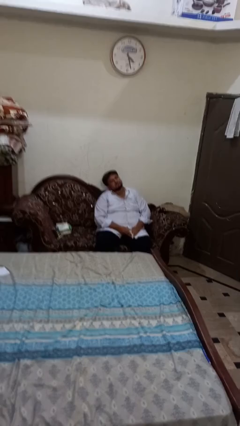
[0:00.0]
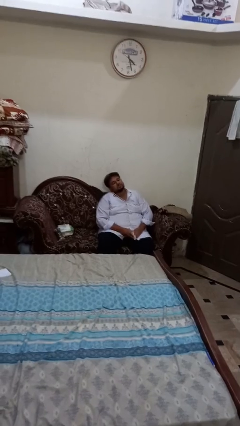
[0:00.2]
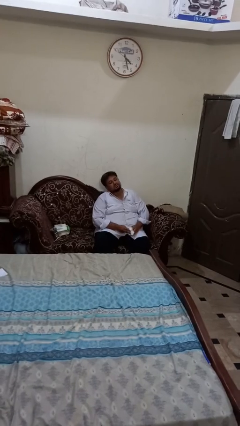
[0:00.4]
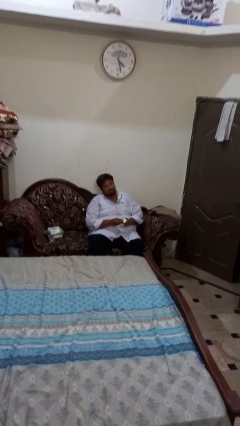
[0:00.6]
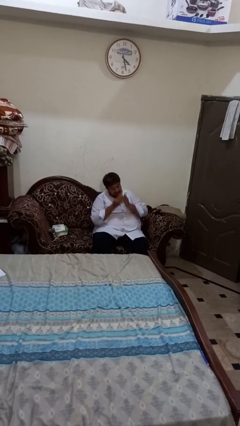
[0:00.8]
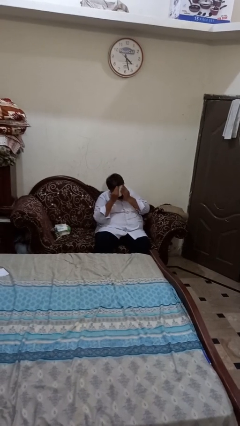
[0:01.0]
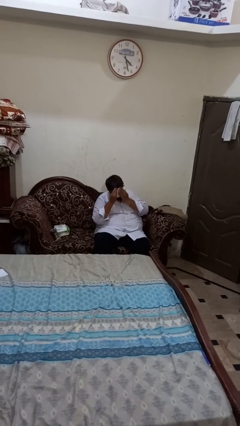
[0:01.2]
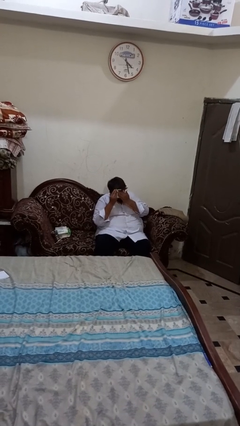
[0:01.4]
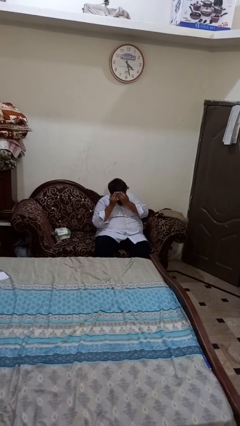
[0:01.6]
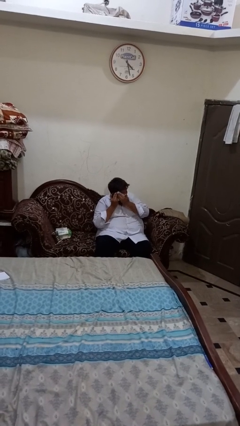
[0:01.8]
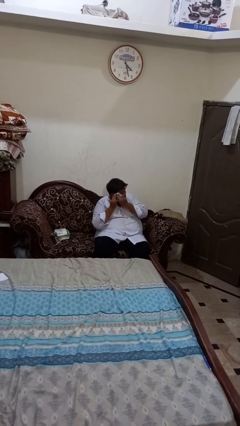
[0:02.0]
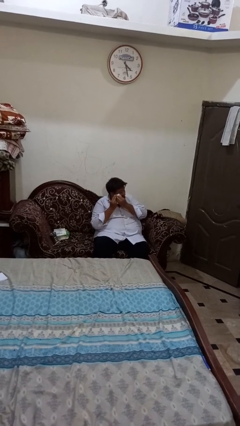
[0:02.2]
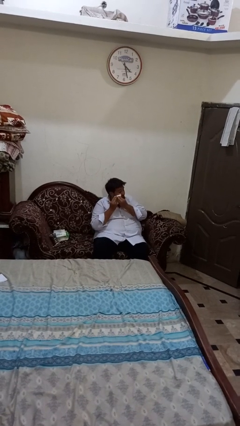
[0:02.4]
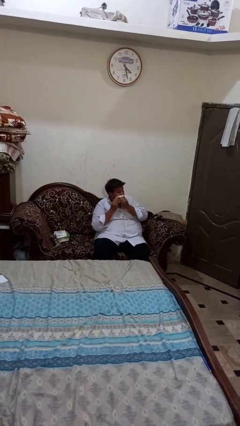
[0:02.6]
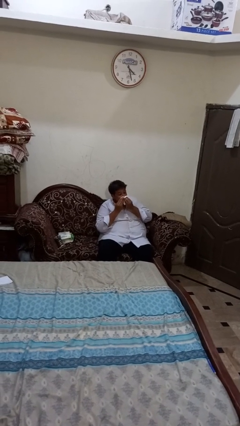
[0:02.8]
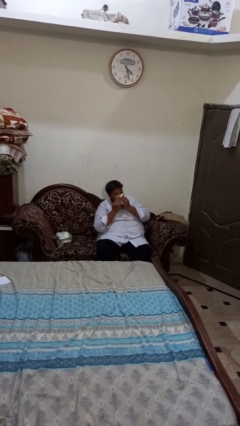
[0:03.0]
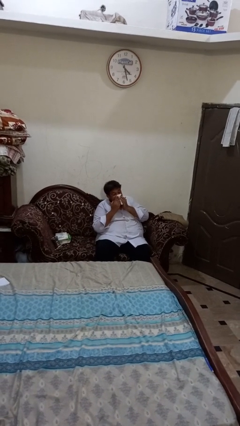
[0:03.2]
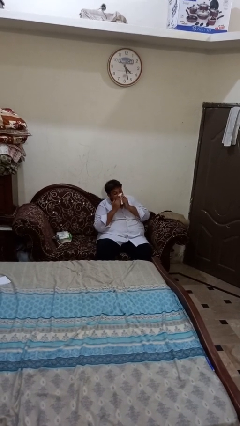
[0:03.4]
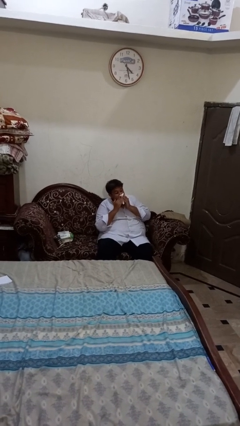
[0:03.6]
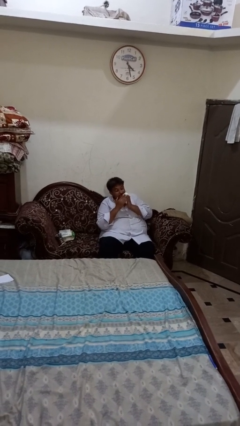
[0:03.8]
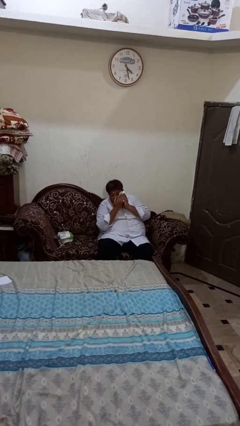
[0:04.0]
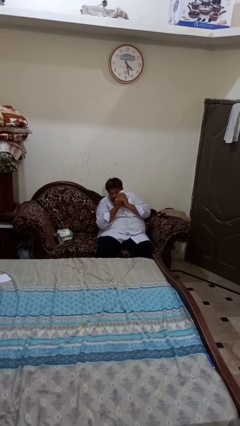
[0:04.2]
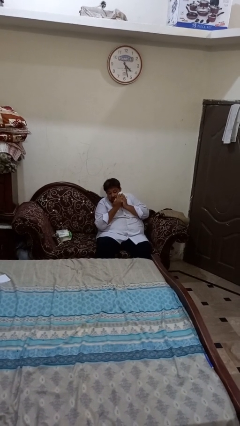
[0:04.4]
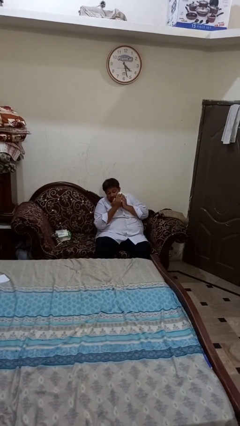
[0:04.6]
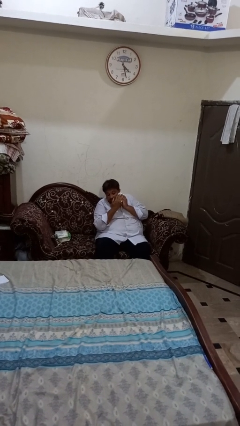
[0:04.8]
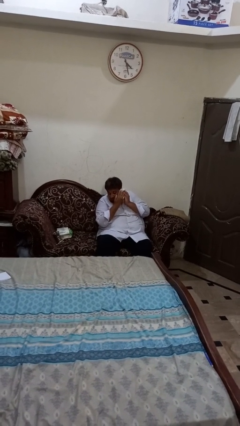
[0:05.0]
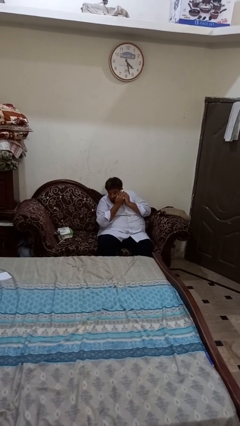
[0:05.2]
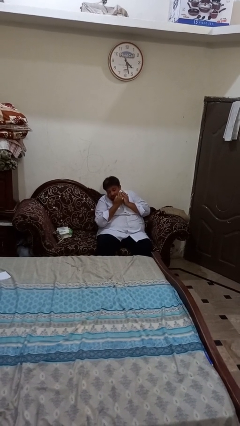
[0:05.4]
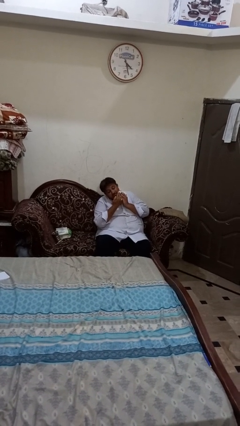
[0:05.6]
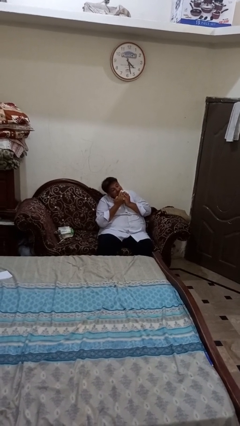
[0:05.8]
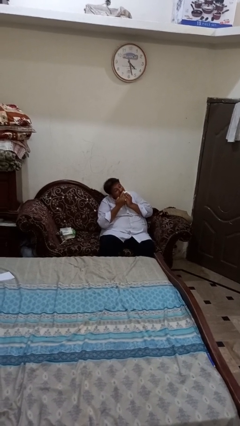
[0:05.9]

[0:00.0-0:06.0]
person wipes mouth with napkin

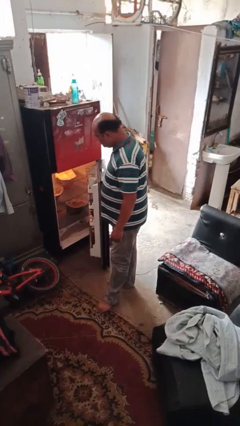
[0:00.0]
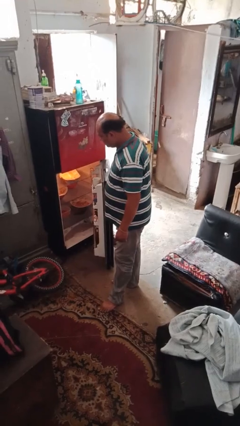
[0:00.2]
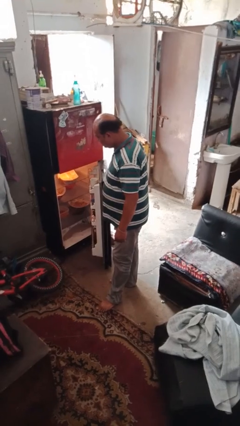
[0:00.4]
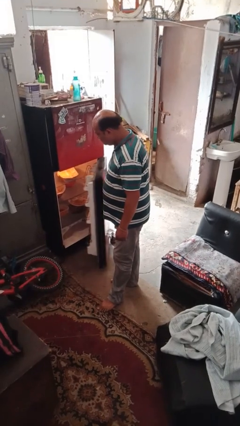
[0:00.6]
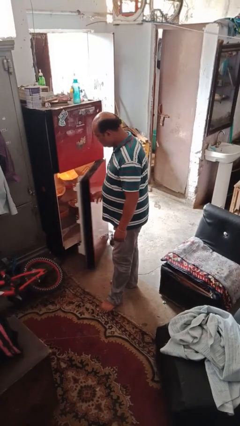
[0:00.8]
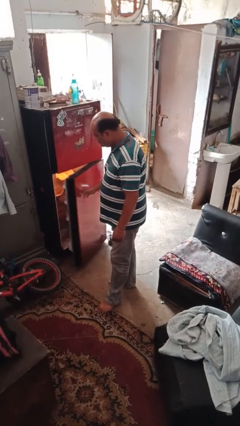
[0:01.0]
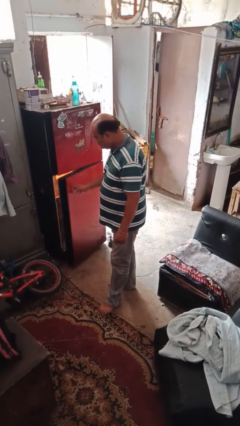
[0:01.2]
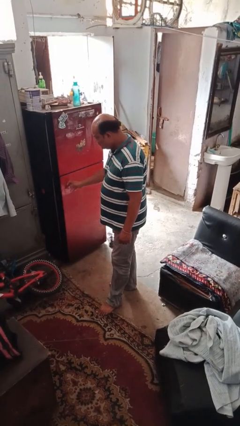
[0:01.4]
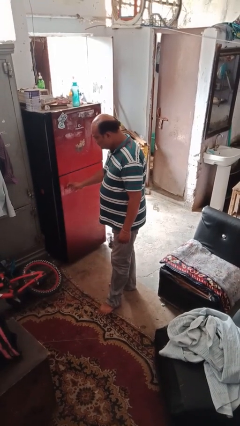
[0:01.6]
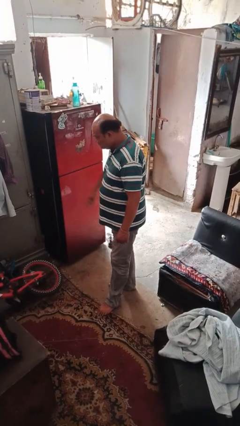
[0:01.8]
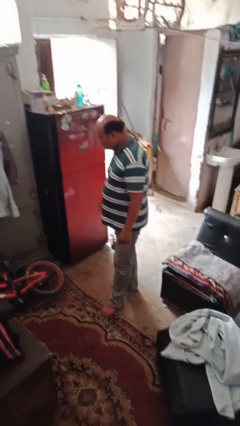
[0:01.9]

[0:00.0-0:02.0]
person closes refrigerator

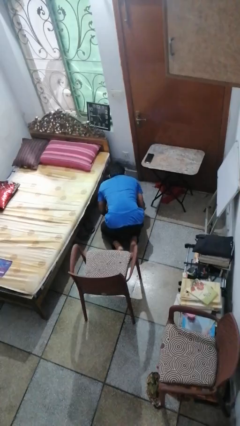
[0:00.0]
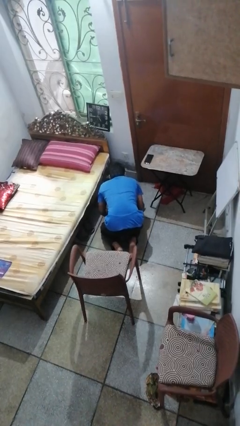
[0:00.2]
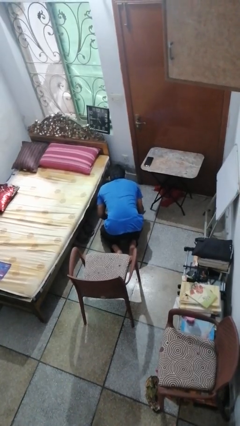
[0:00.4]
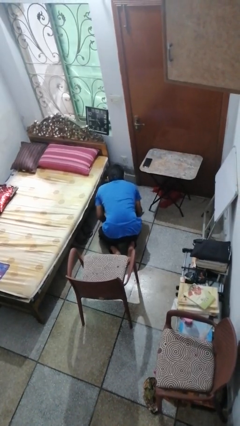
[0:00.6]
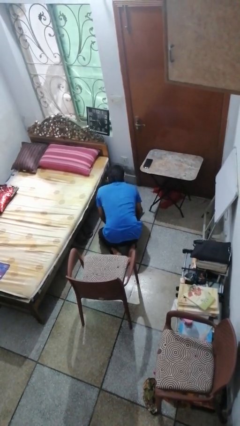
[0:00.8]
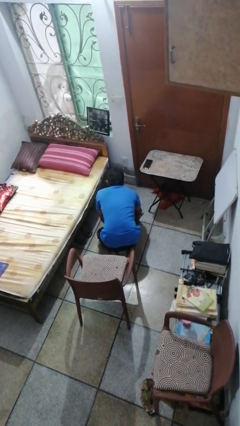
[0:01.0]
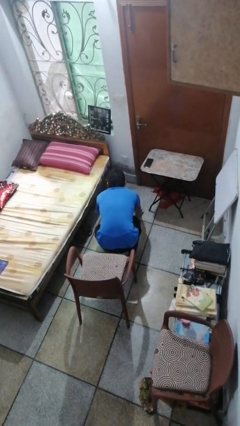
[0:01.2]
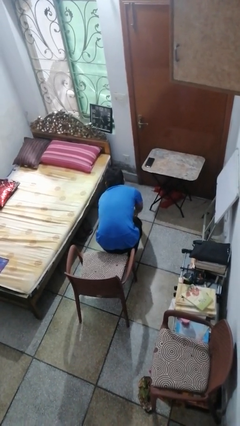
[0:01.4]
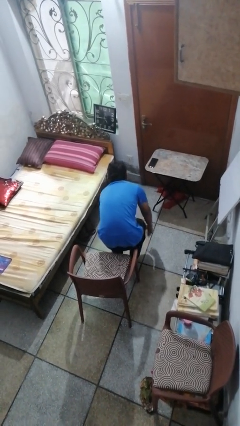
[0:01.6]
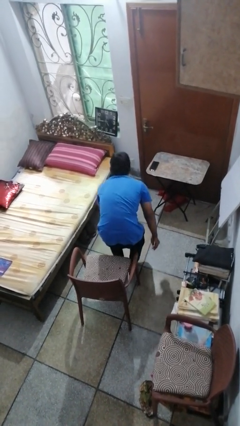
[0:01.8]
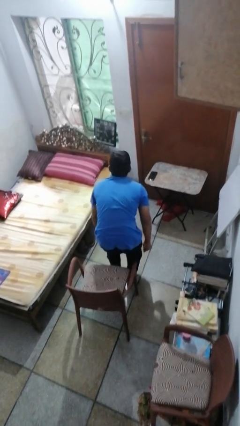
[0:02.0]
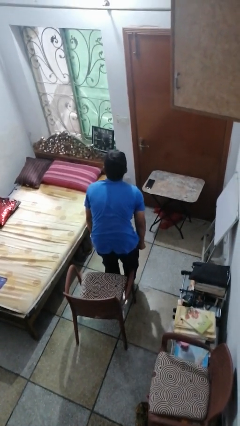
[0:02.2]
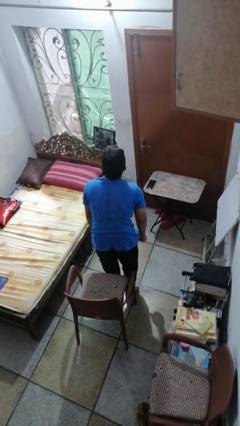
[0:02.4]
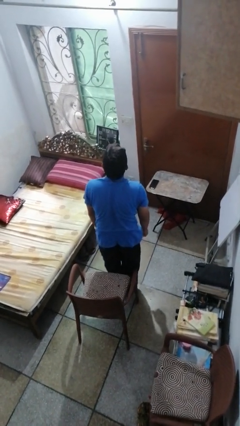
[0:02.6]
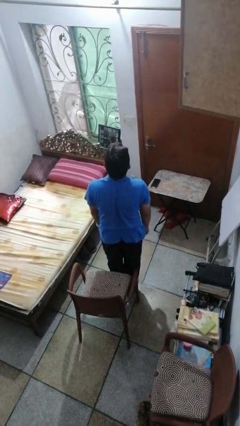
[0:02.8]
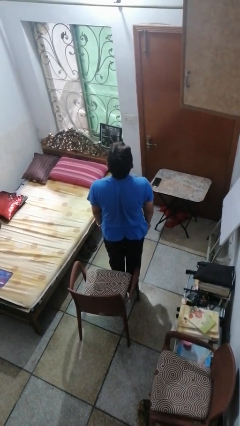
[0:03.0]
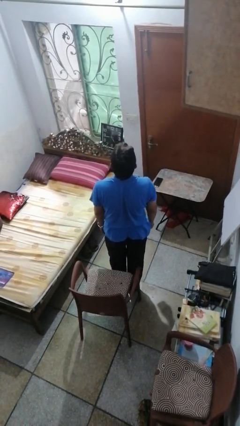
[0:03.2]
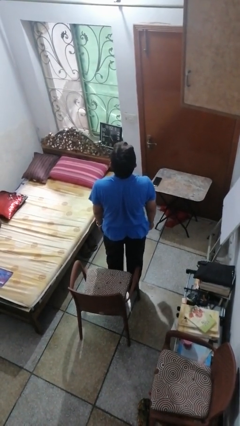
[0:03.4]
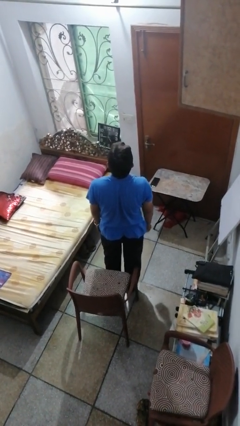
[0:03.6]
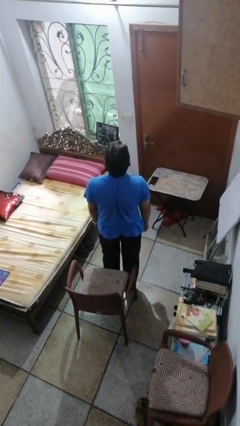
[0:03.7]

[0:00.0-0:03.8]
person stands up from floor

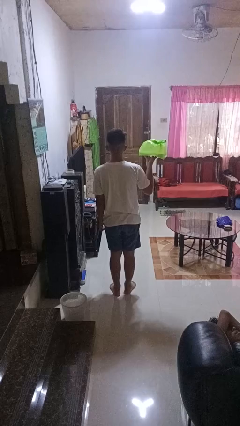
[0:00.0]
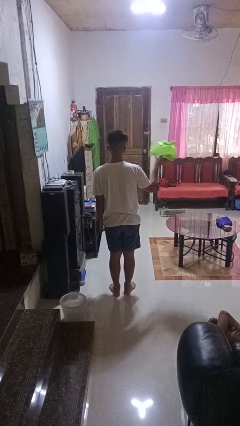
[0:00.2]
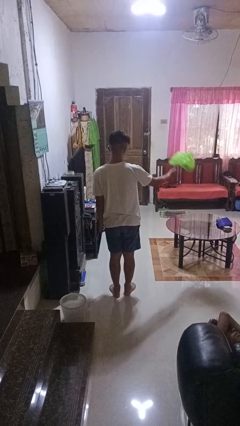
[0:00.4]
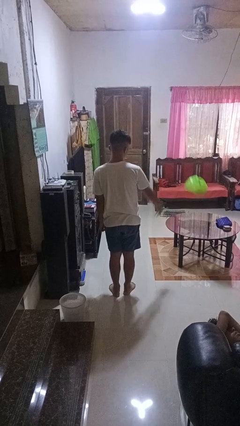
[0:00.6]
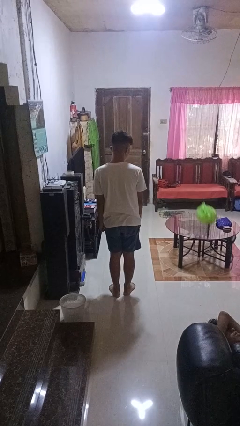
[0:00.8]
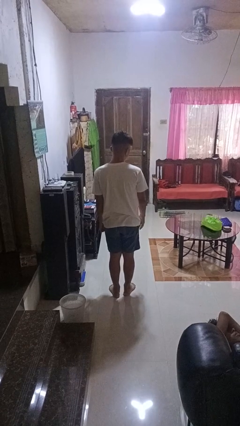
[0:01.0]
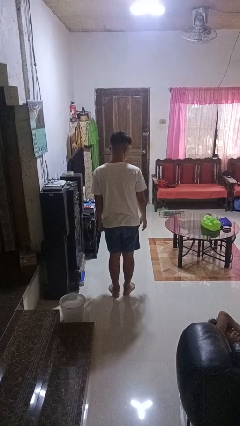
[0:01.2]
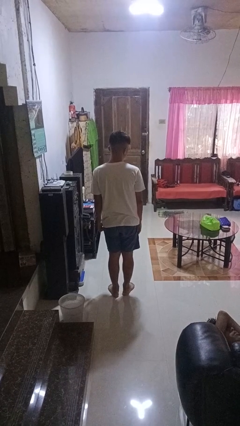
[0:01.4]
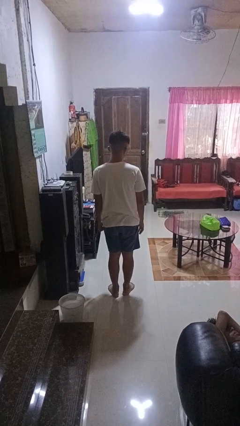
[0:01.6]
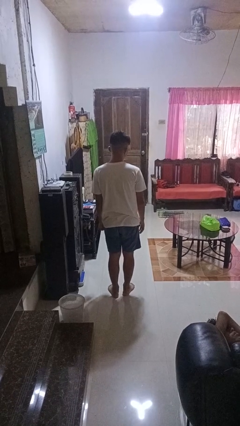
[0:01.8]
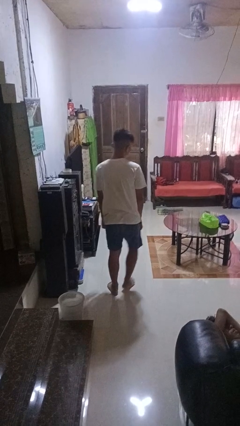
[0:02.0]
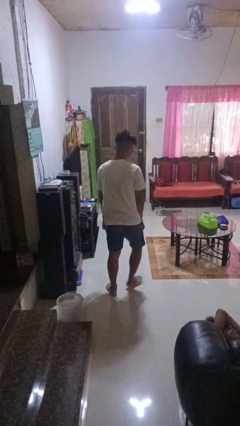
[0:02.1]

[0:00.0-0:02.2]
person throws object on table

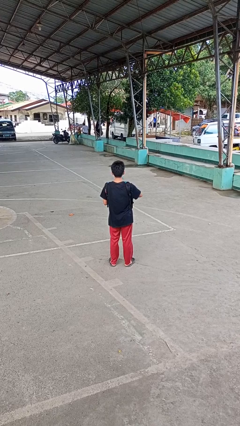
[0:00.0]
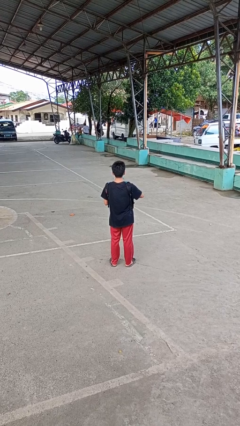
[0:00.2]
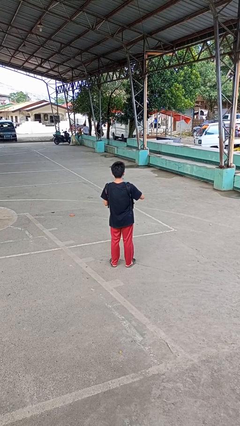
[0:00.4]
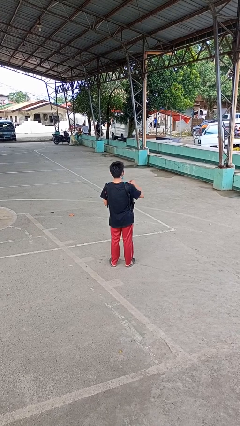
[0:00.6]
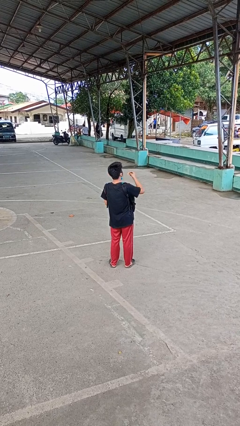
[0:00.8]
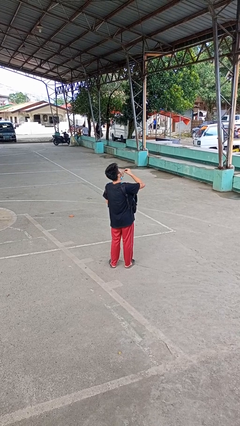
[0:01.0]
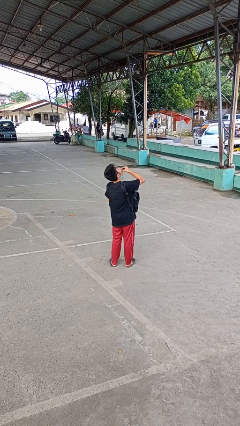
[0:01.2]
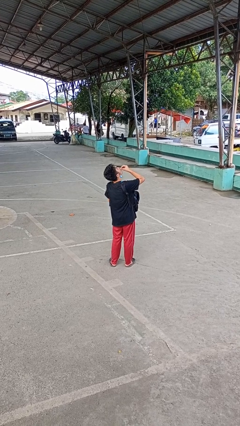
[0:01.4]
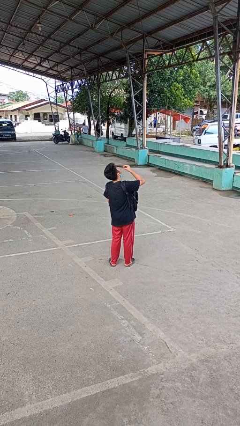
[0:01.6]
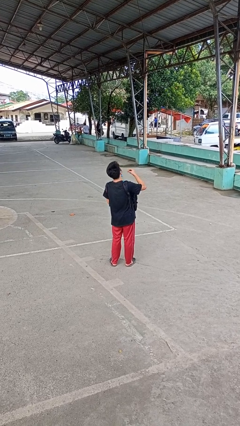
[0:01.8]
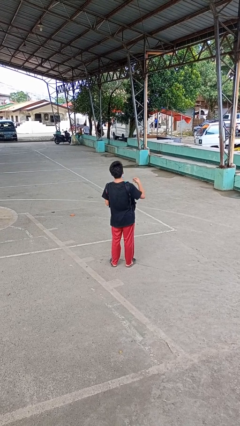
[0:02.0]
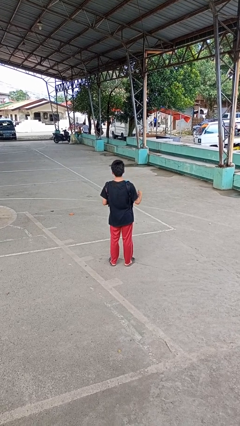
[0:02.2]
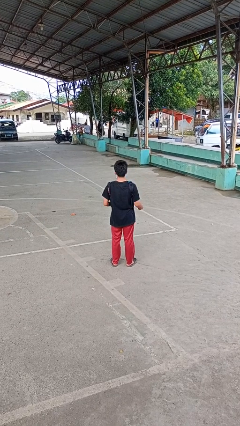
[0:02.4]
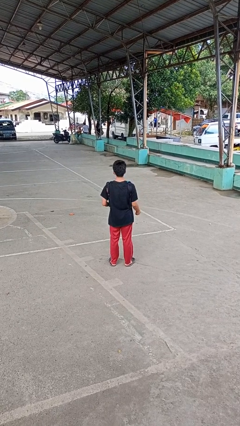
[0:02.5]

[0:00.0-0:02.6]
person eats snack from bag

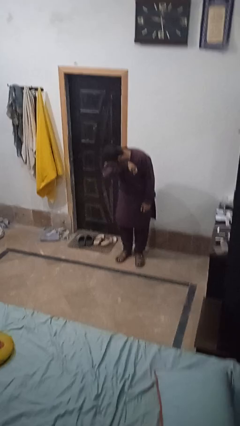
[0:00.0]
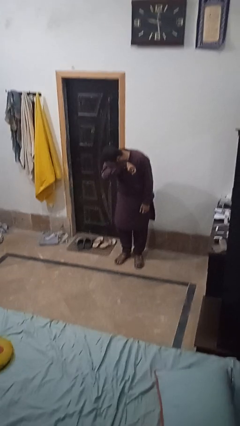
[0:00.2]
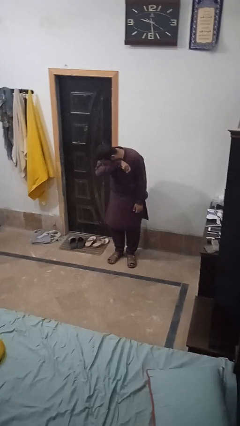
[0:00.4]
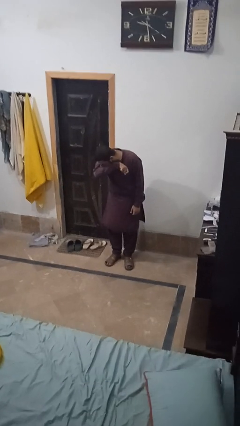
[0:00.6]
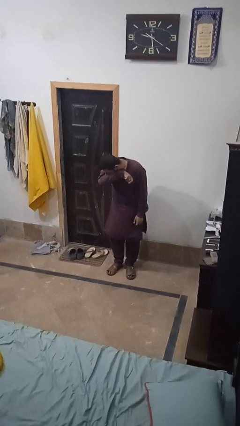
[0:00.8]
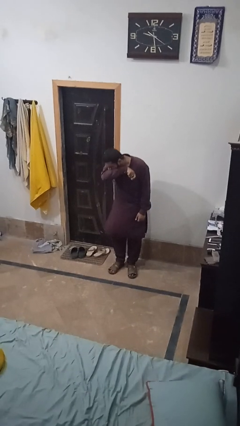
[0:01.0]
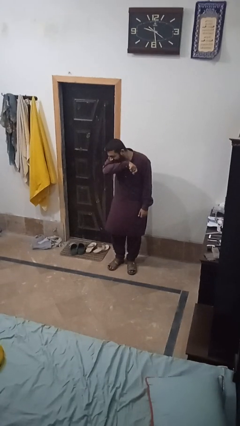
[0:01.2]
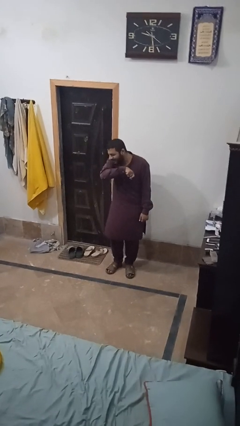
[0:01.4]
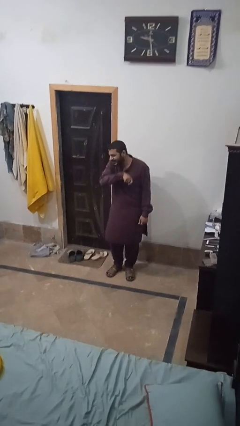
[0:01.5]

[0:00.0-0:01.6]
person sneezes into arm
